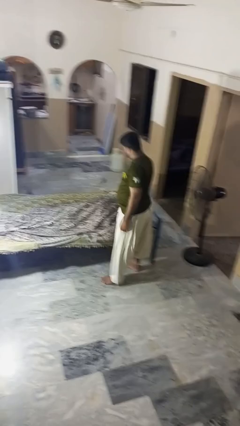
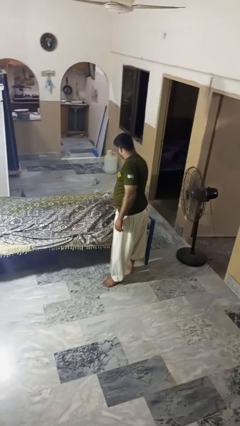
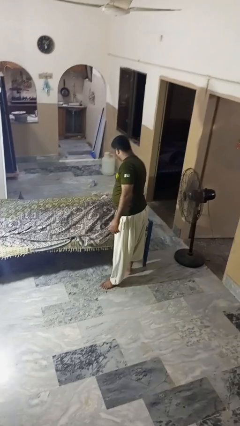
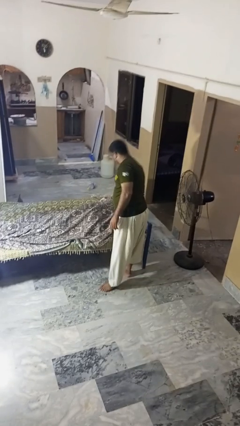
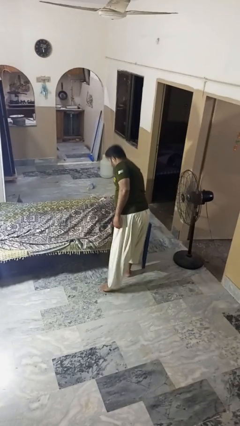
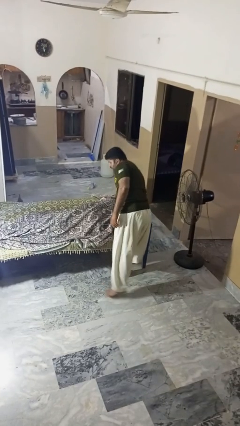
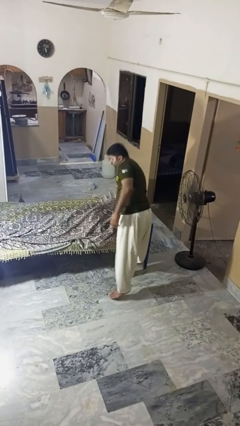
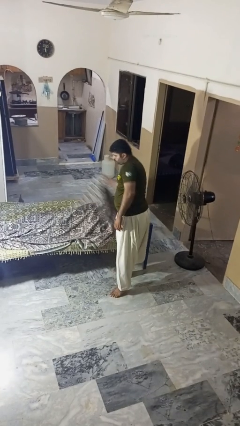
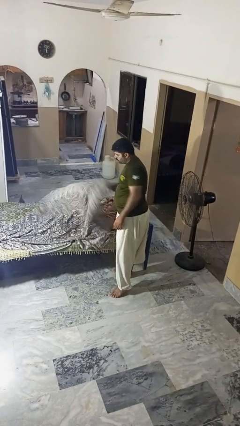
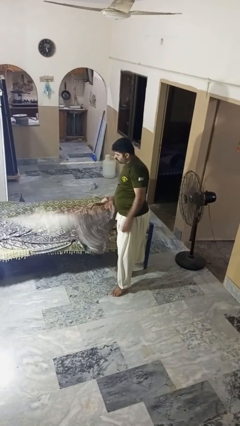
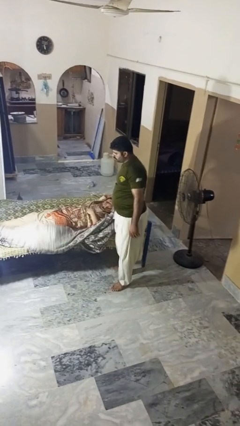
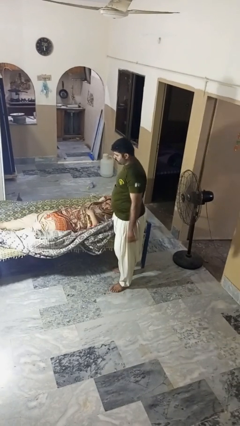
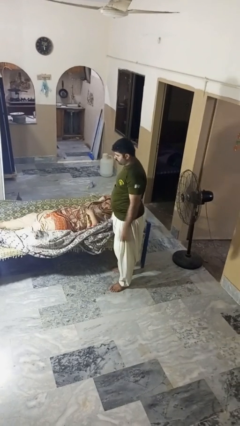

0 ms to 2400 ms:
person uncovers friend with blanket

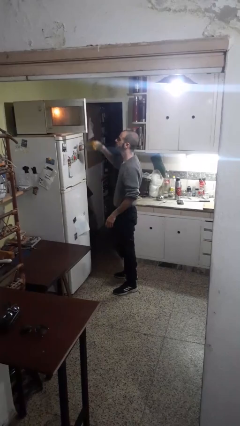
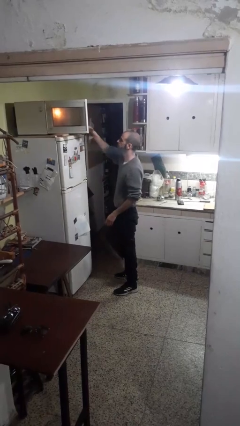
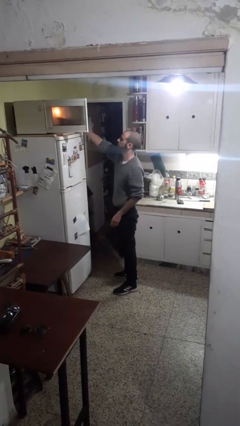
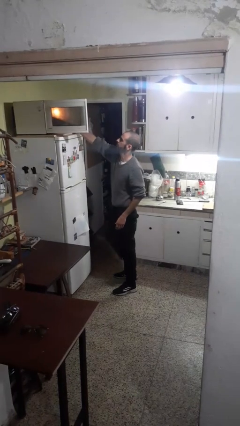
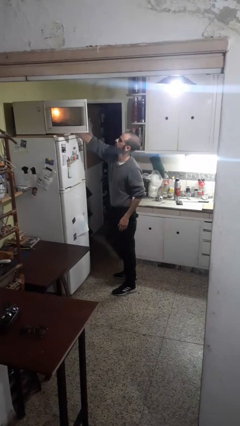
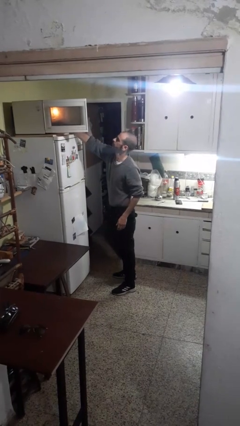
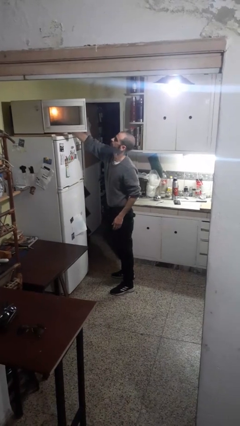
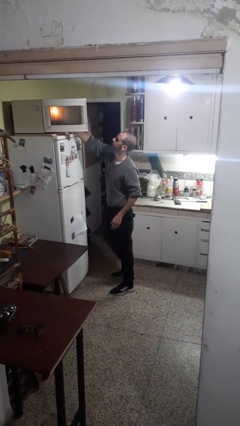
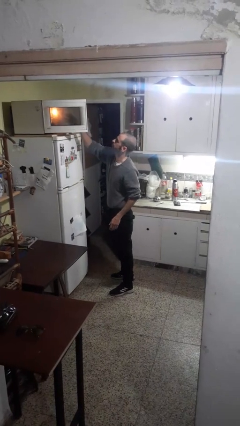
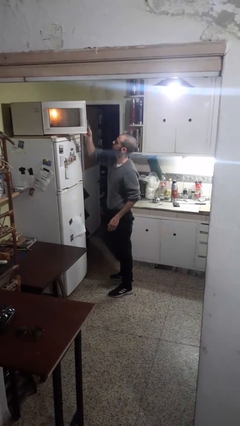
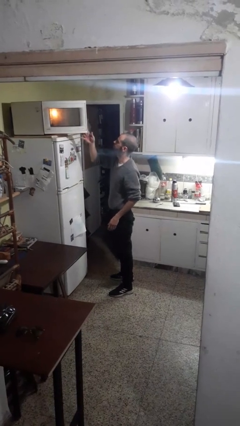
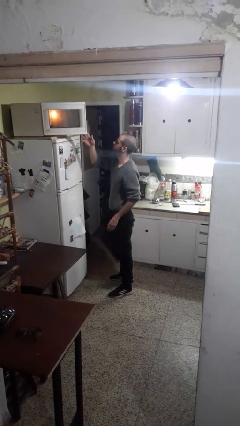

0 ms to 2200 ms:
person puts object into microwave

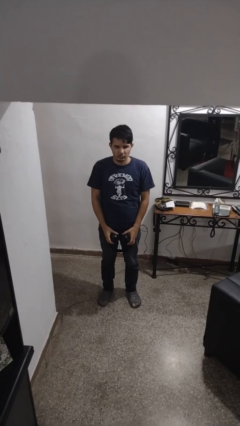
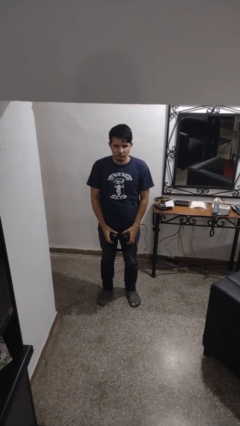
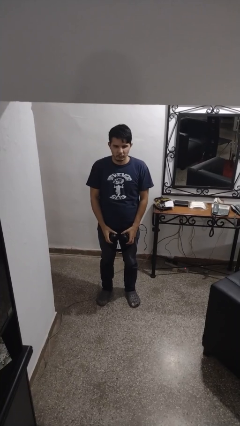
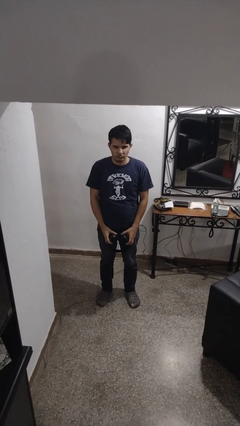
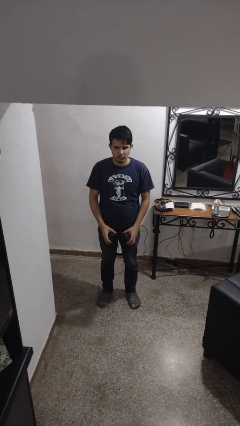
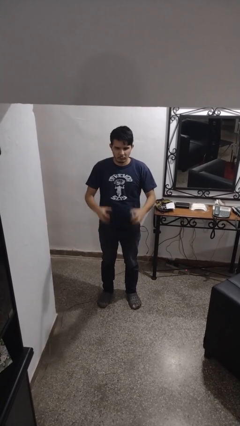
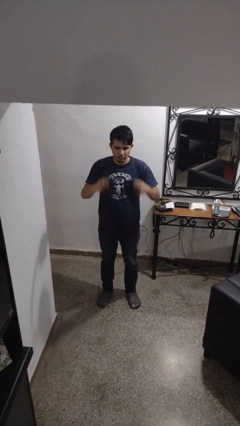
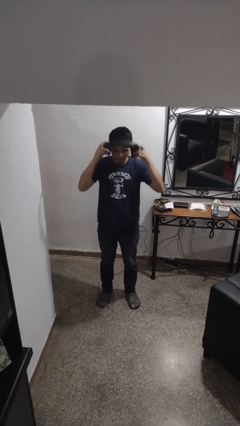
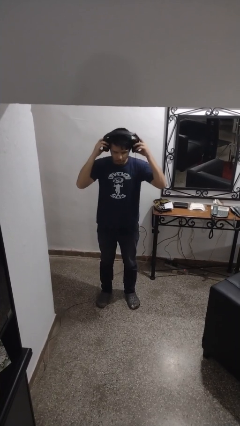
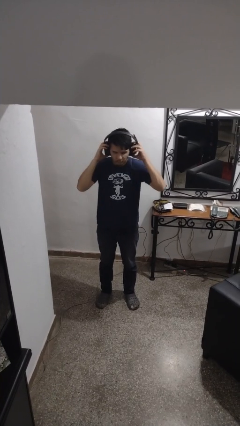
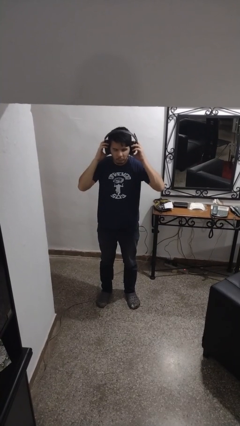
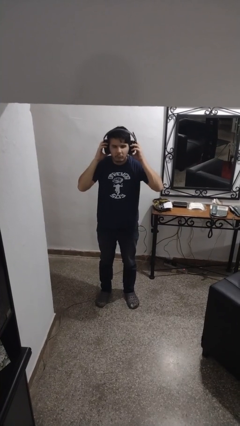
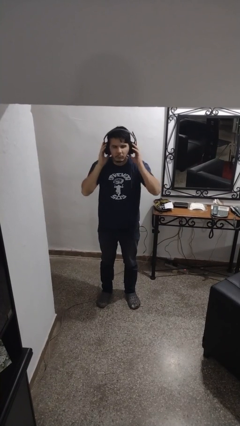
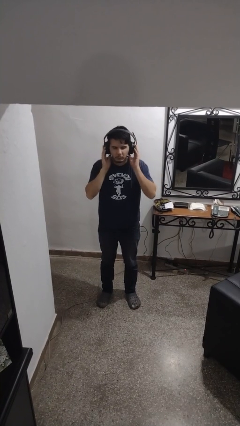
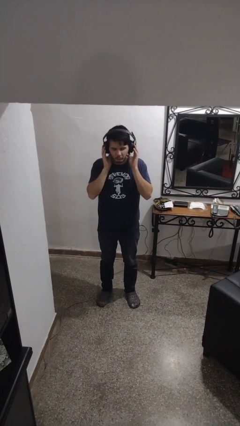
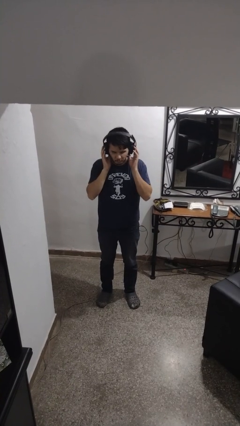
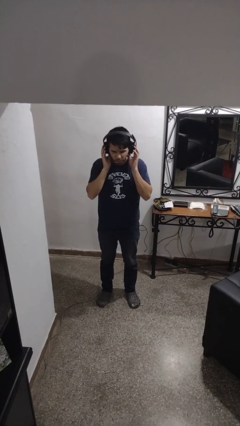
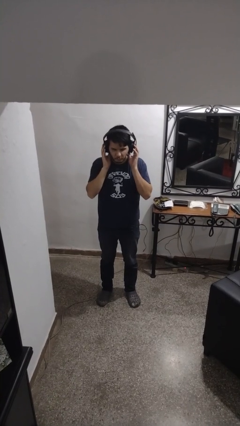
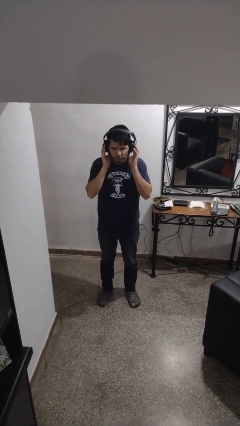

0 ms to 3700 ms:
person puts on headphones

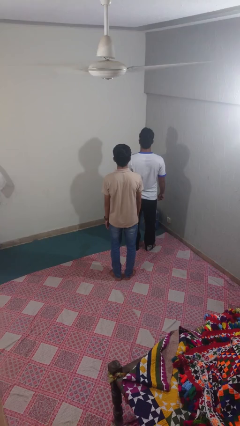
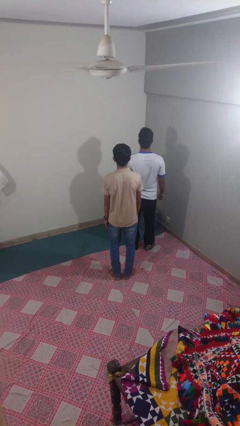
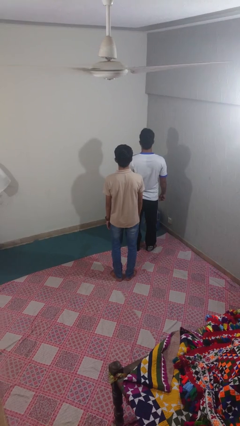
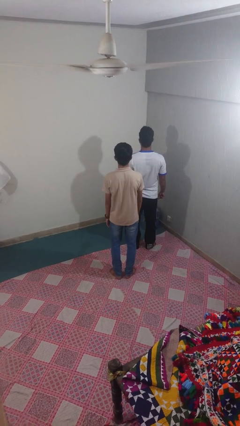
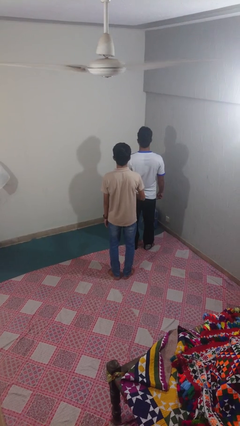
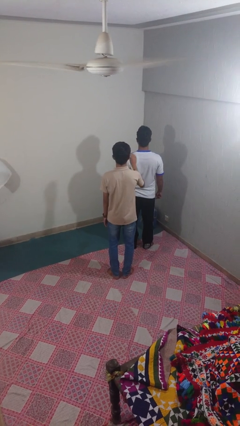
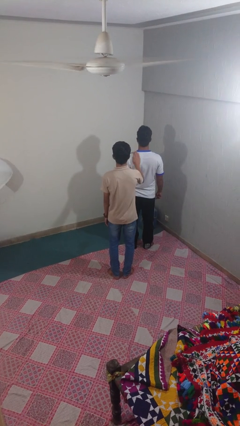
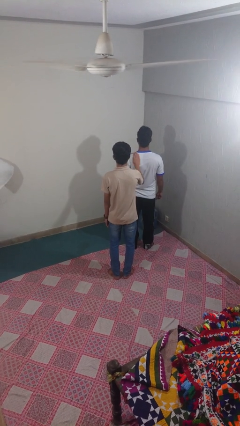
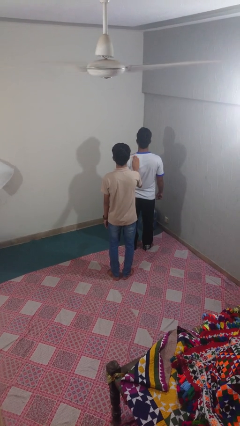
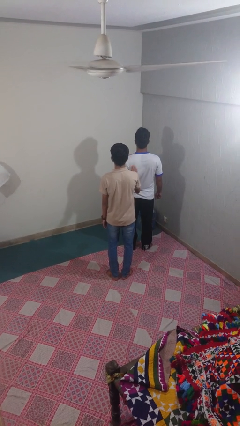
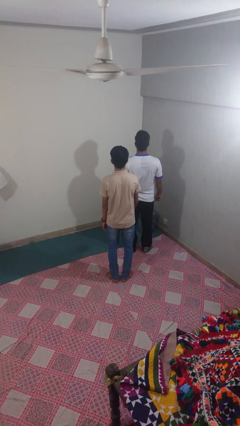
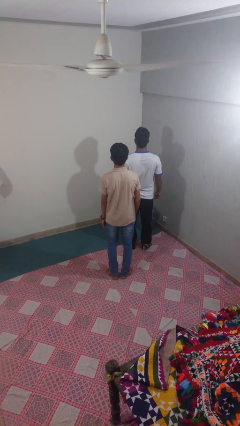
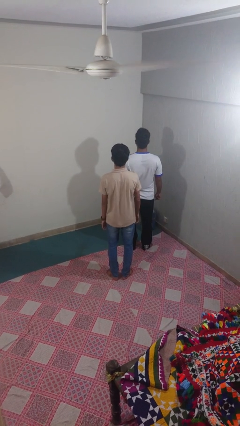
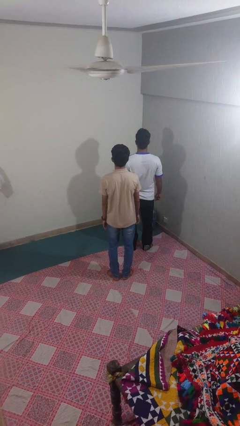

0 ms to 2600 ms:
person touches back of person

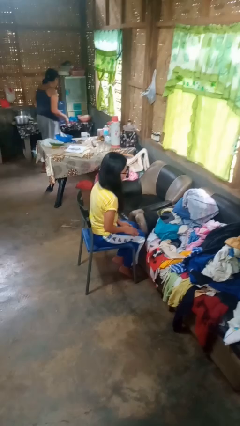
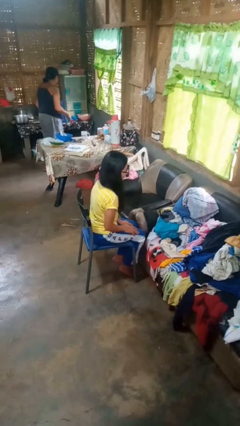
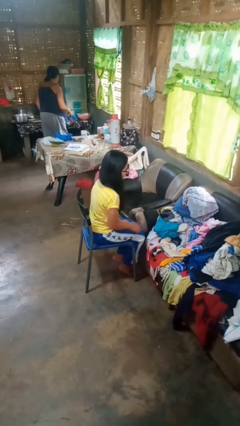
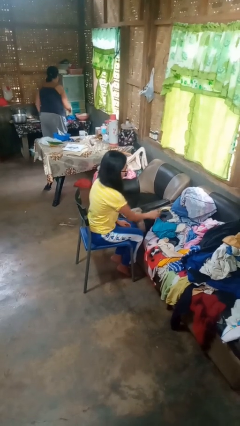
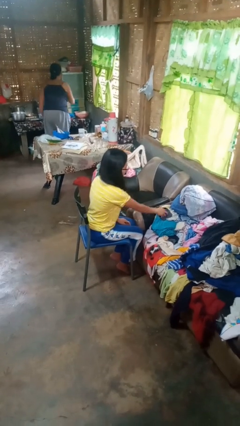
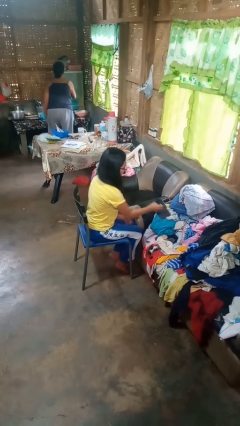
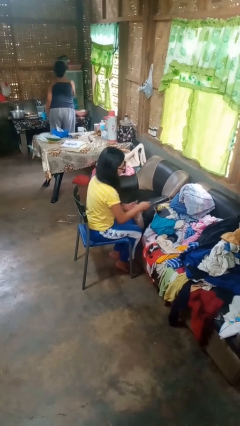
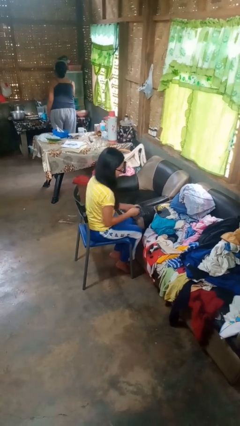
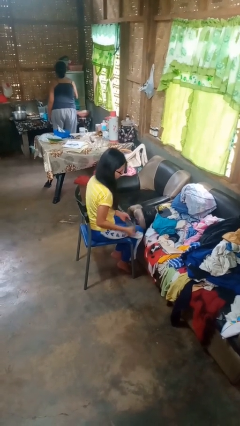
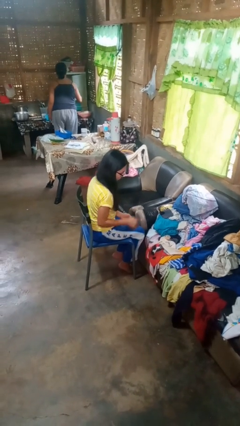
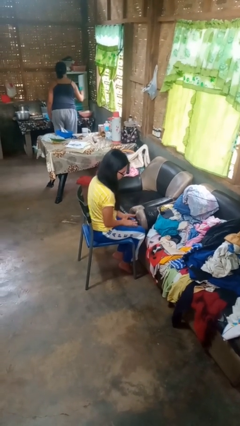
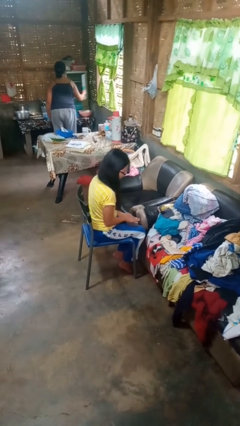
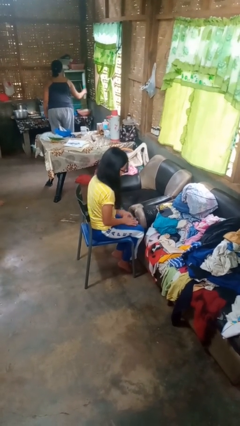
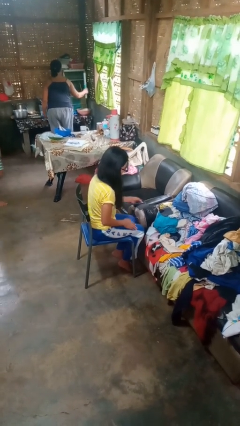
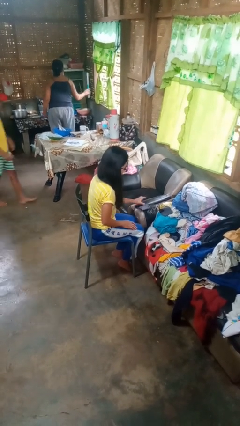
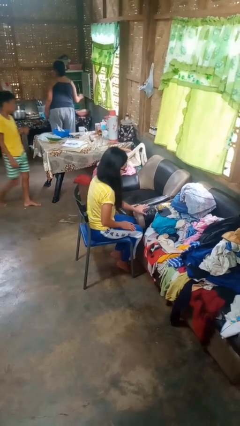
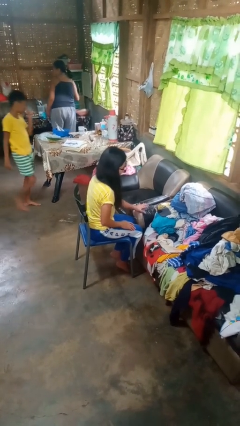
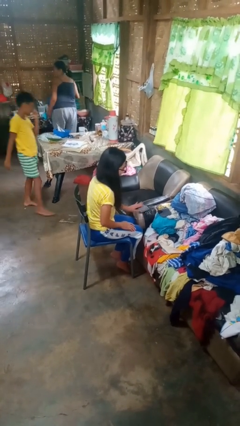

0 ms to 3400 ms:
person folds socks

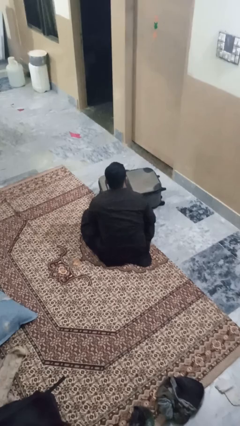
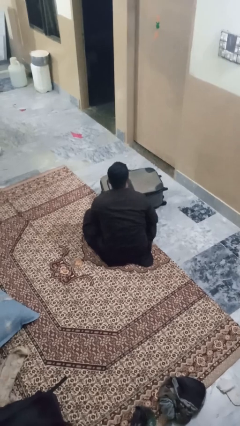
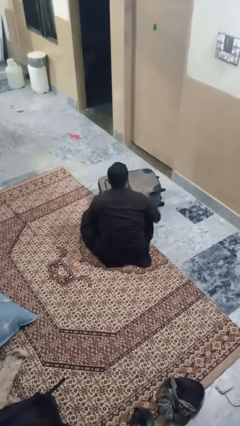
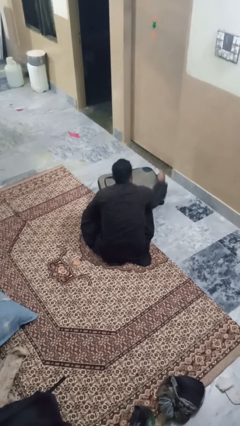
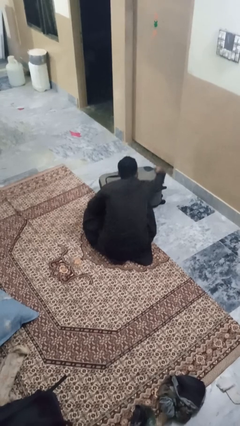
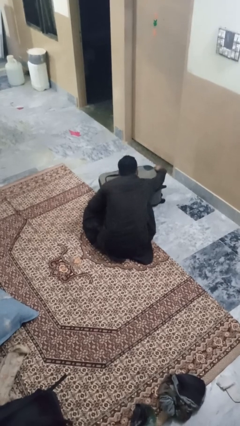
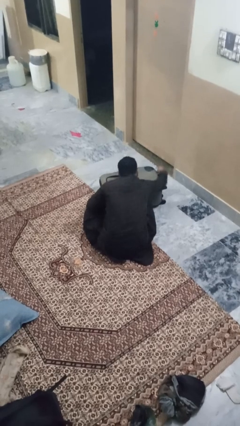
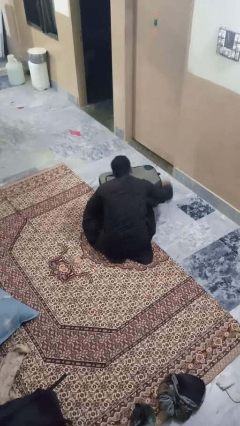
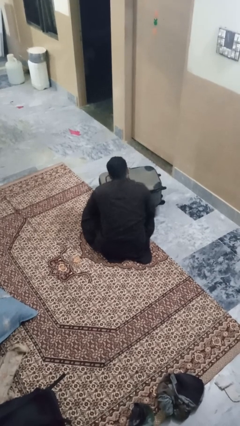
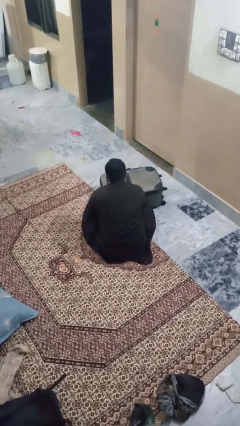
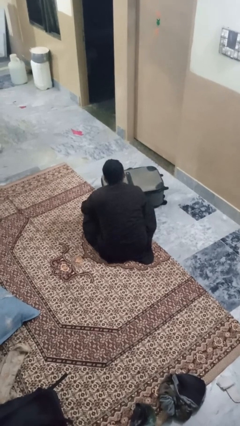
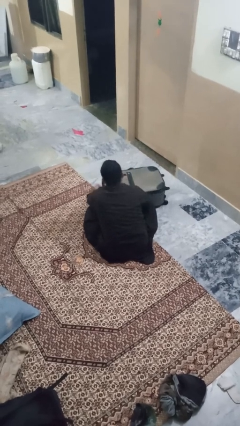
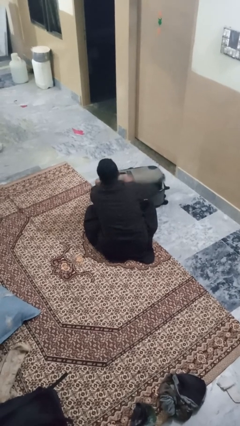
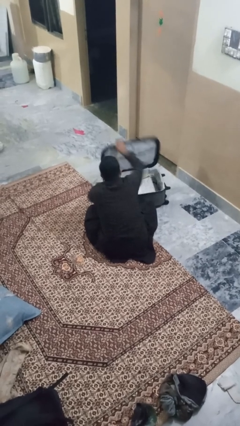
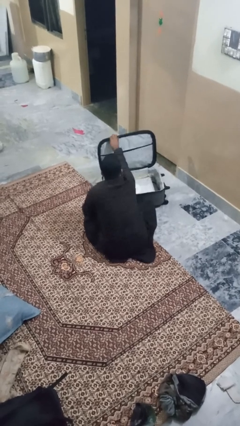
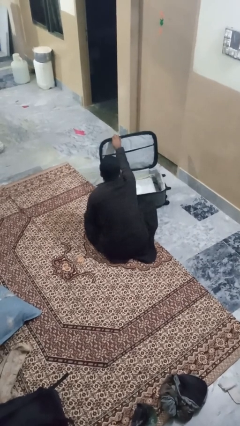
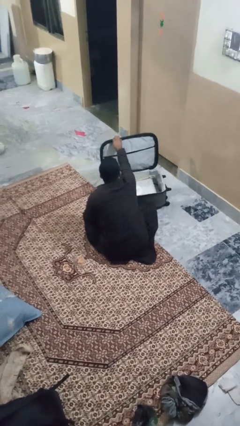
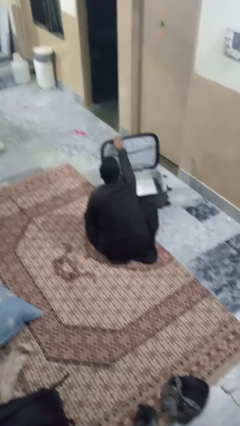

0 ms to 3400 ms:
person opens suitcase
